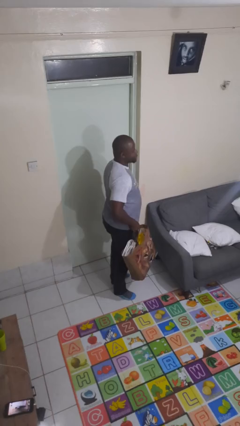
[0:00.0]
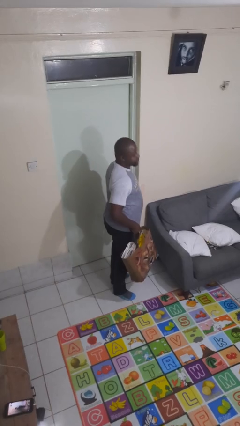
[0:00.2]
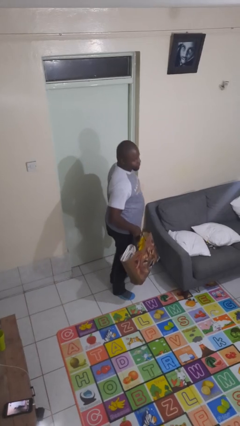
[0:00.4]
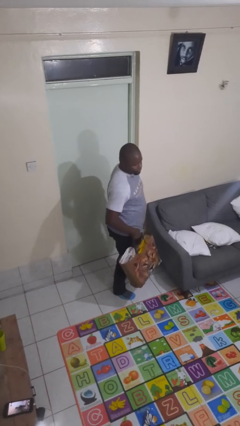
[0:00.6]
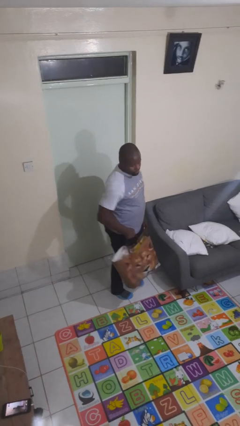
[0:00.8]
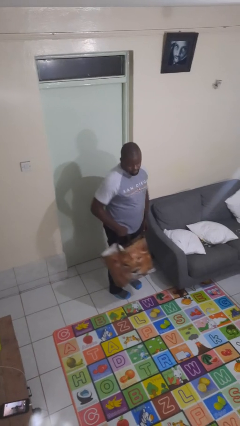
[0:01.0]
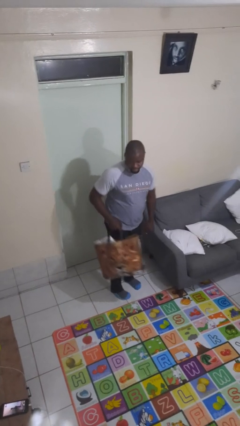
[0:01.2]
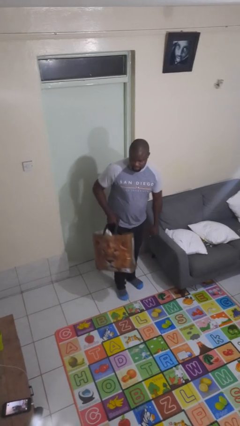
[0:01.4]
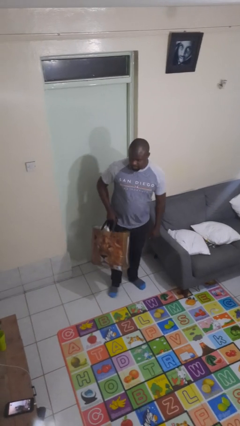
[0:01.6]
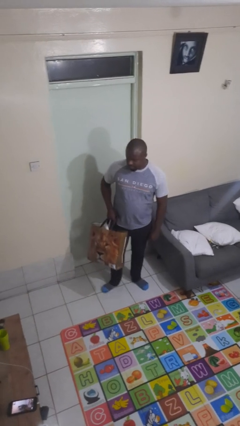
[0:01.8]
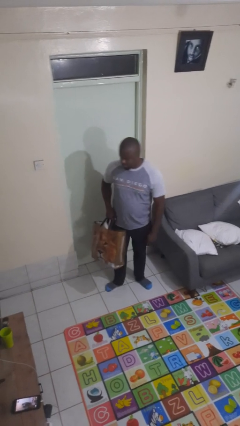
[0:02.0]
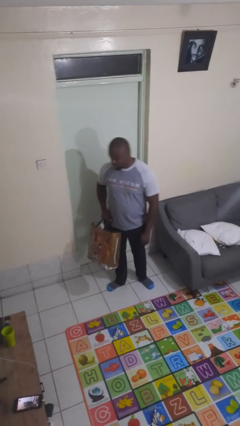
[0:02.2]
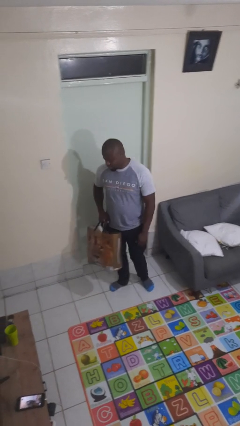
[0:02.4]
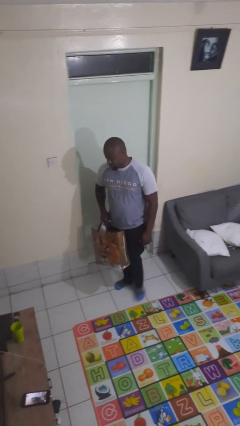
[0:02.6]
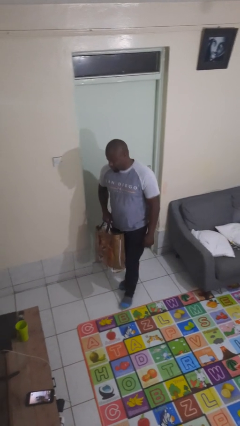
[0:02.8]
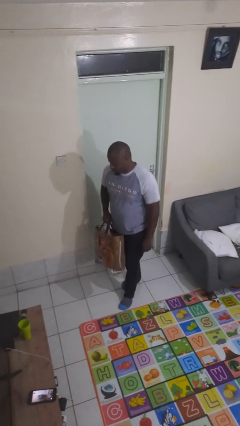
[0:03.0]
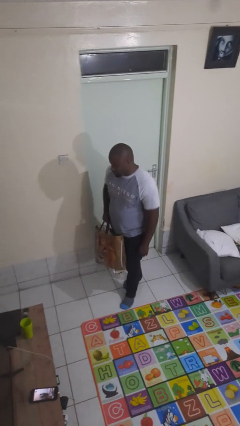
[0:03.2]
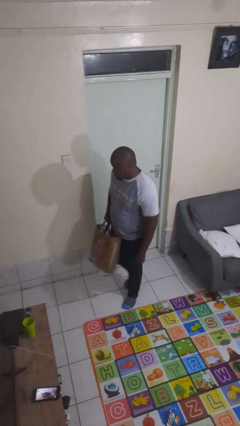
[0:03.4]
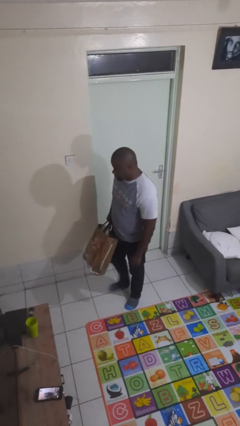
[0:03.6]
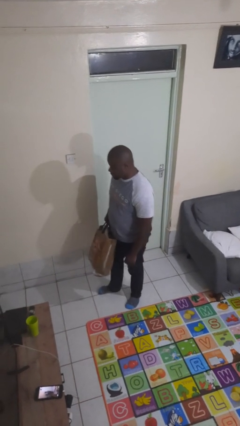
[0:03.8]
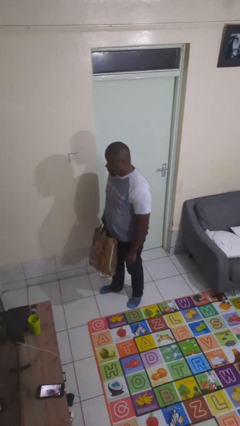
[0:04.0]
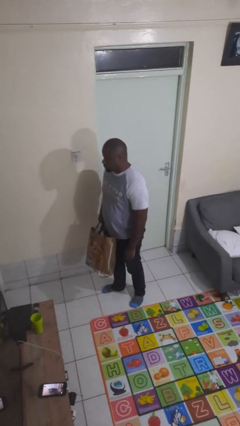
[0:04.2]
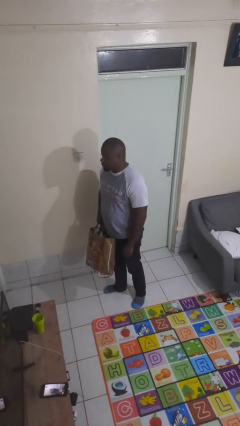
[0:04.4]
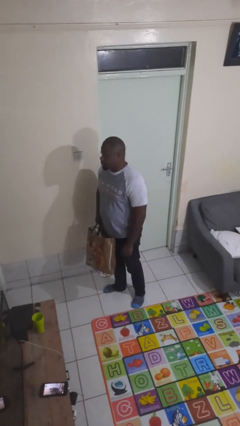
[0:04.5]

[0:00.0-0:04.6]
person carries groceries

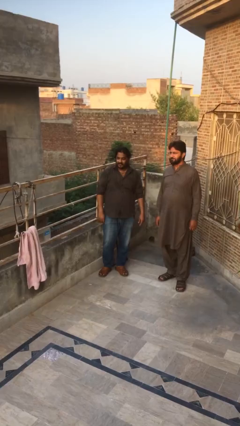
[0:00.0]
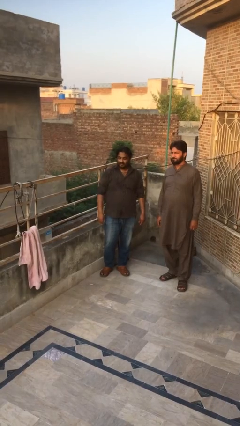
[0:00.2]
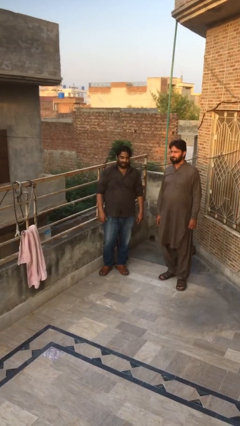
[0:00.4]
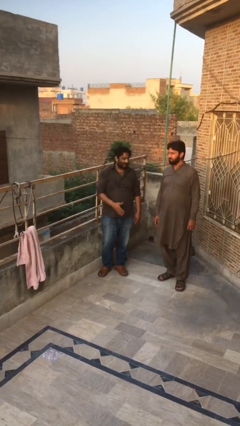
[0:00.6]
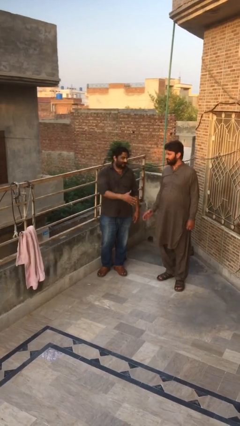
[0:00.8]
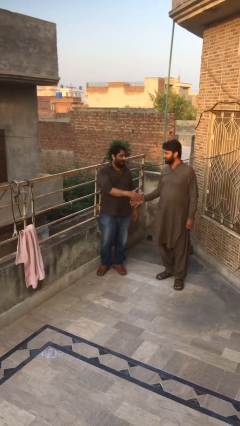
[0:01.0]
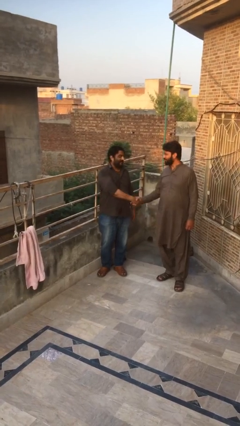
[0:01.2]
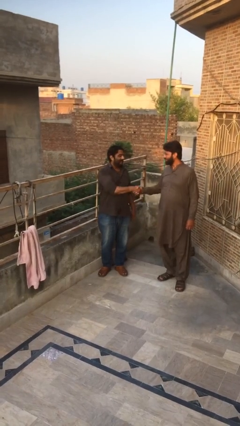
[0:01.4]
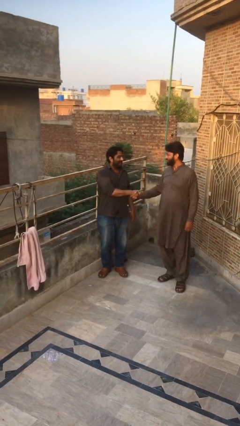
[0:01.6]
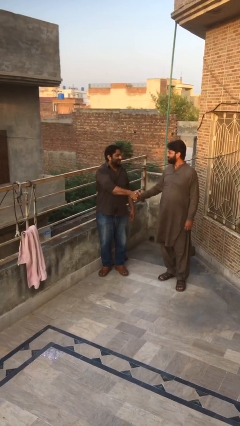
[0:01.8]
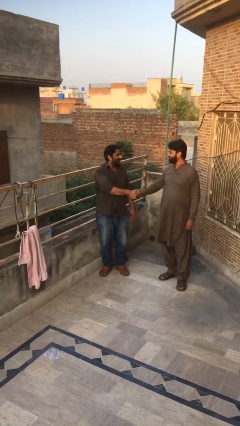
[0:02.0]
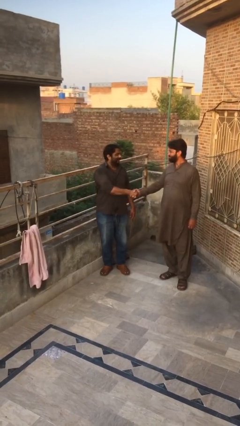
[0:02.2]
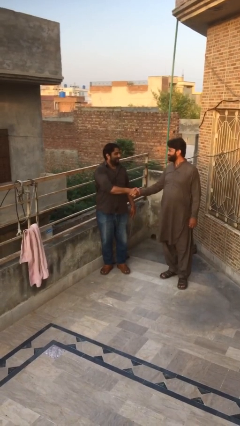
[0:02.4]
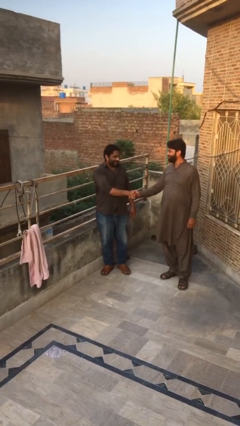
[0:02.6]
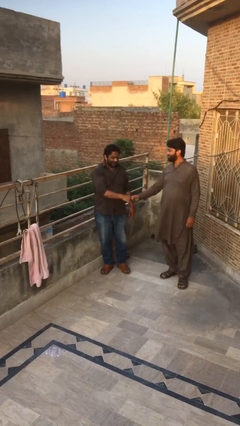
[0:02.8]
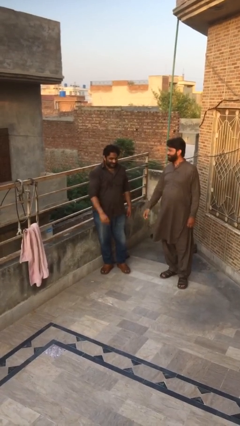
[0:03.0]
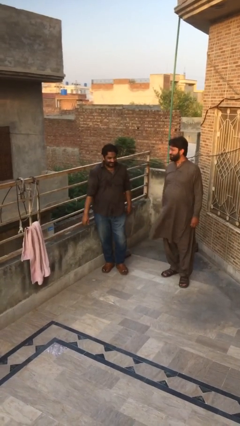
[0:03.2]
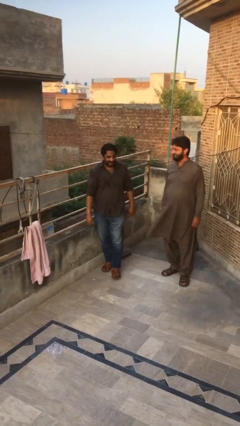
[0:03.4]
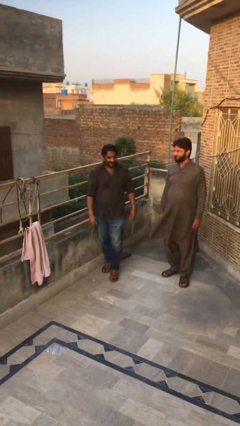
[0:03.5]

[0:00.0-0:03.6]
person shakes hand

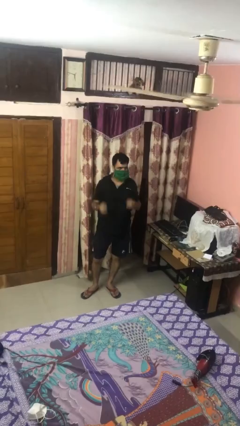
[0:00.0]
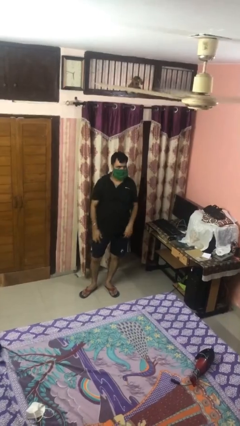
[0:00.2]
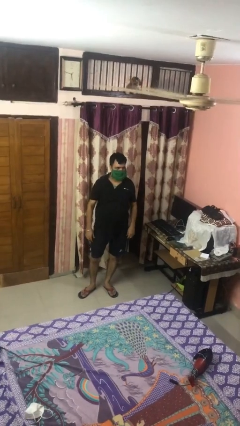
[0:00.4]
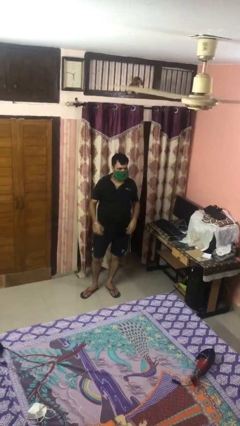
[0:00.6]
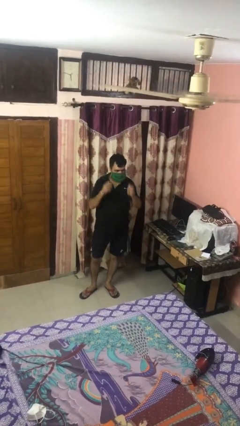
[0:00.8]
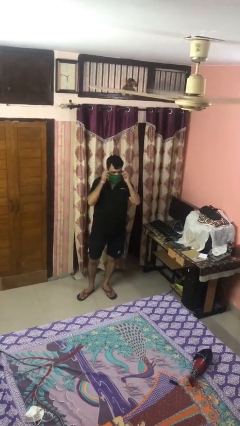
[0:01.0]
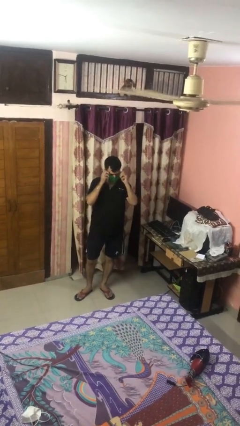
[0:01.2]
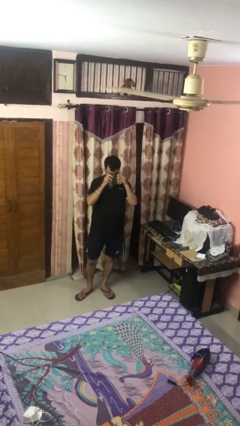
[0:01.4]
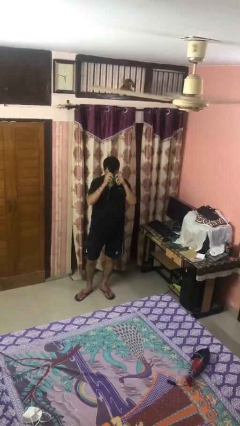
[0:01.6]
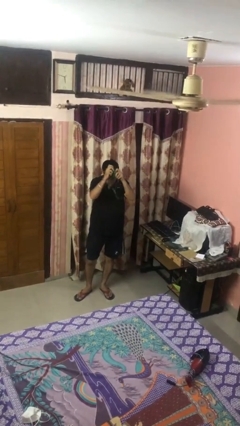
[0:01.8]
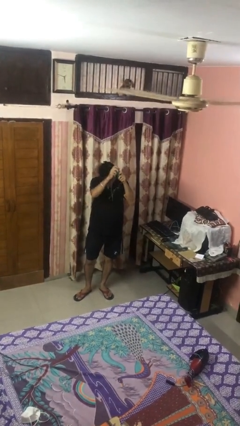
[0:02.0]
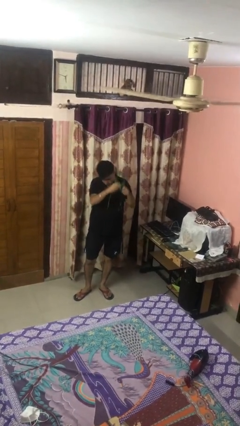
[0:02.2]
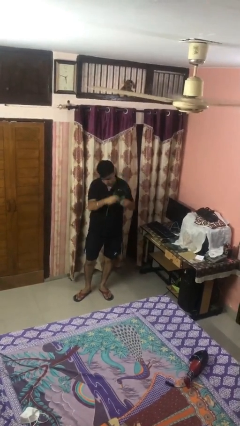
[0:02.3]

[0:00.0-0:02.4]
person takes off facemask

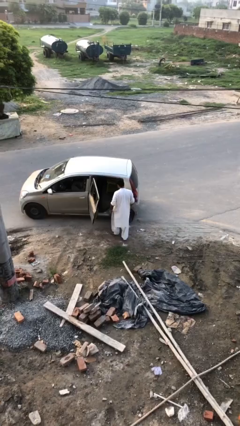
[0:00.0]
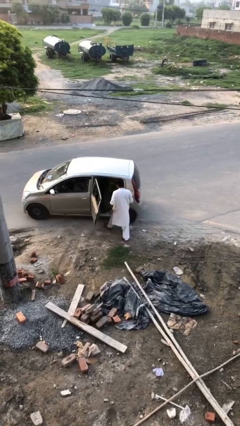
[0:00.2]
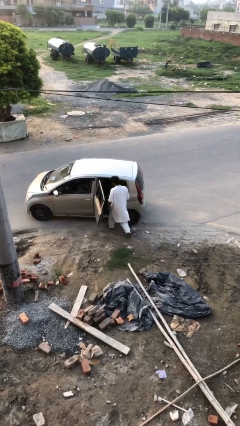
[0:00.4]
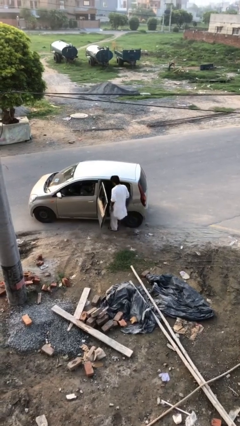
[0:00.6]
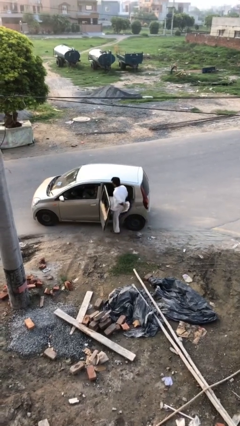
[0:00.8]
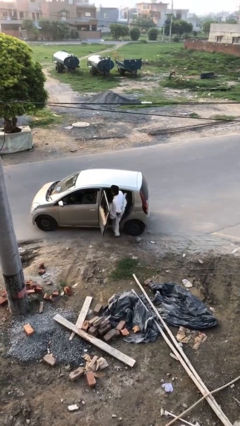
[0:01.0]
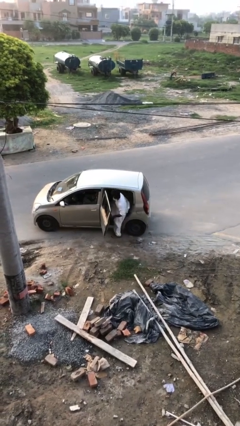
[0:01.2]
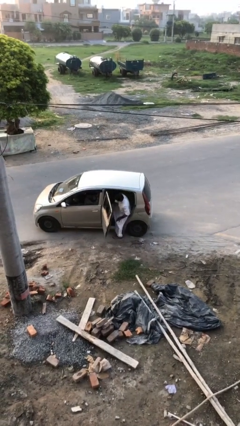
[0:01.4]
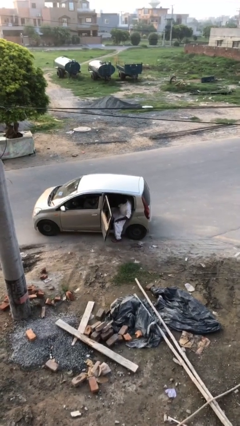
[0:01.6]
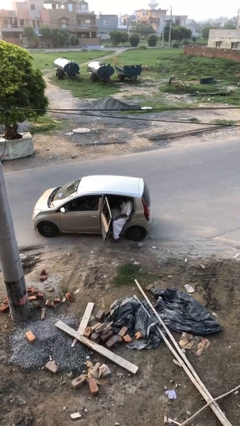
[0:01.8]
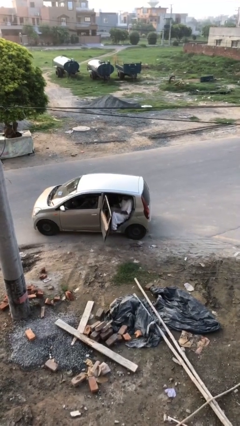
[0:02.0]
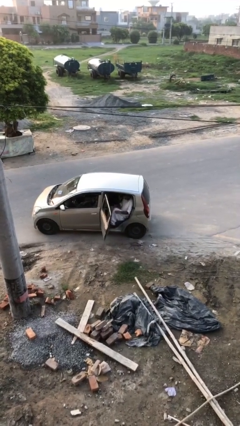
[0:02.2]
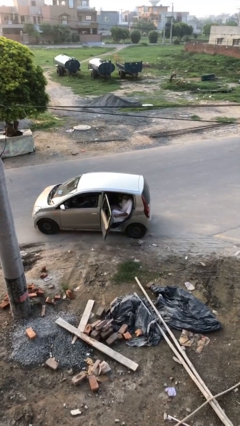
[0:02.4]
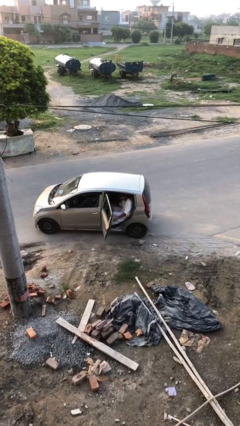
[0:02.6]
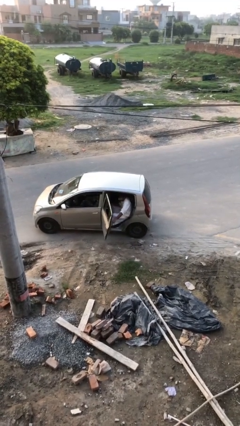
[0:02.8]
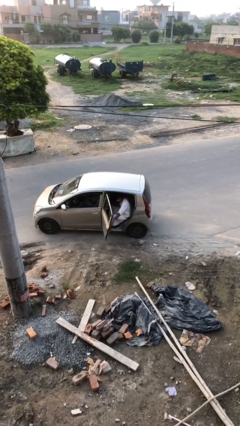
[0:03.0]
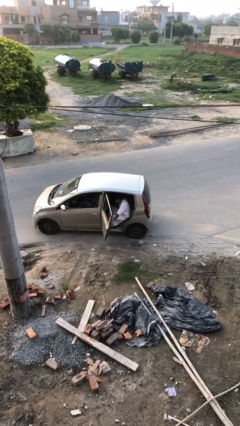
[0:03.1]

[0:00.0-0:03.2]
person enters car

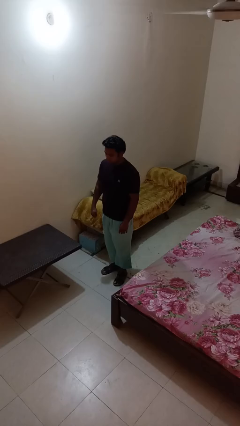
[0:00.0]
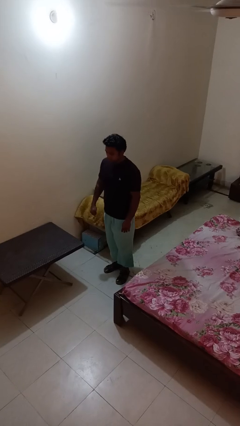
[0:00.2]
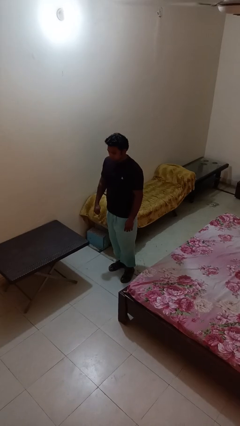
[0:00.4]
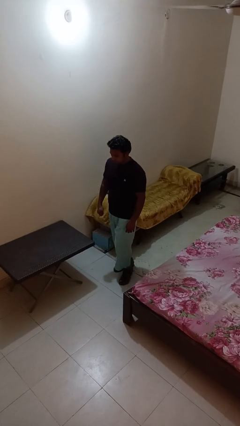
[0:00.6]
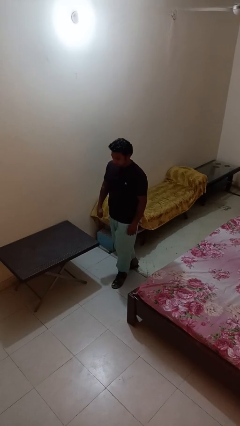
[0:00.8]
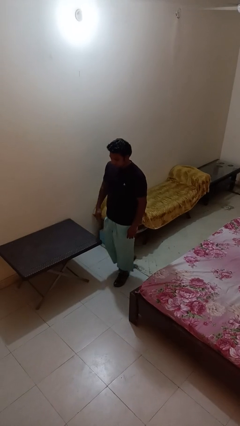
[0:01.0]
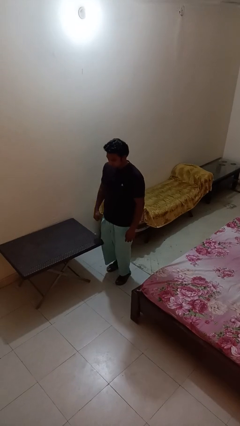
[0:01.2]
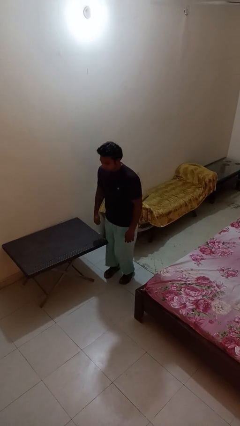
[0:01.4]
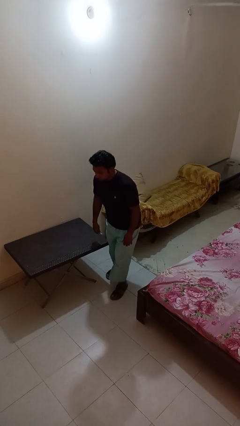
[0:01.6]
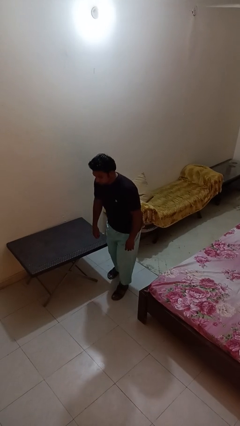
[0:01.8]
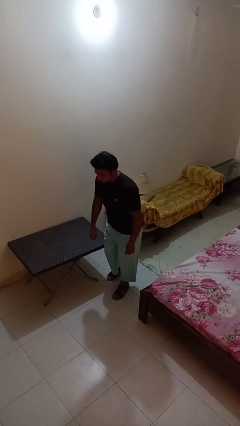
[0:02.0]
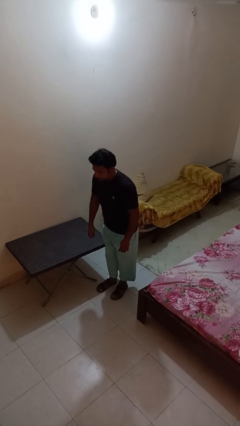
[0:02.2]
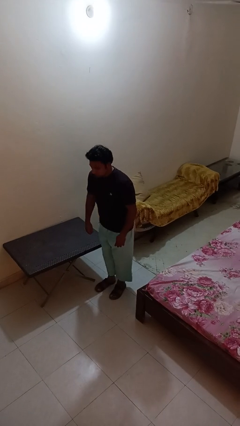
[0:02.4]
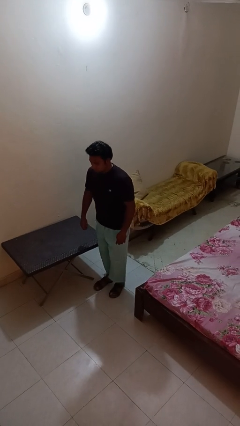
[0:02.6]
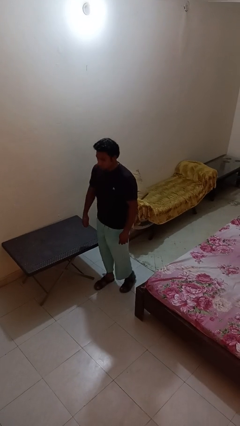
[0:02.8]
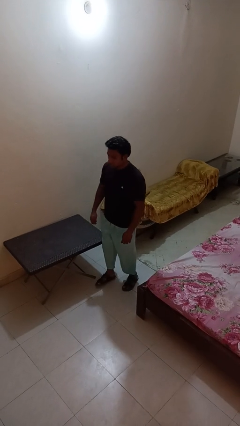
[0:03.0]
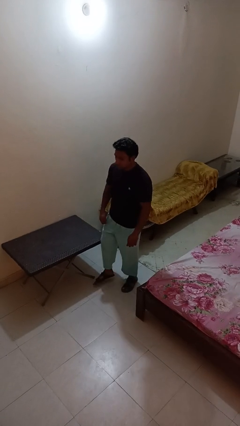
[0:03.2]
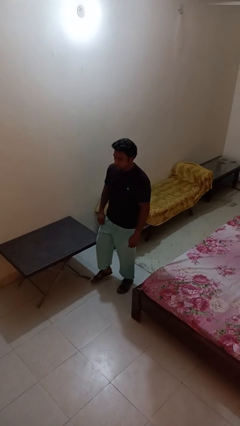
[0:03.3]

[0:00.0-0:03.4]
person bumps into table

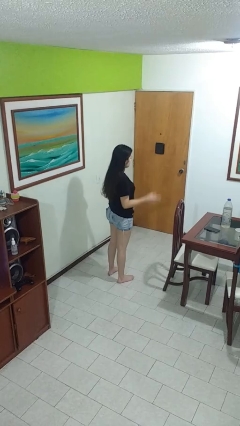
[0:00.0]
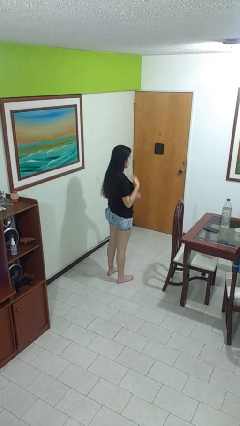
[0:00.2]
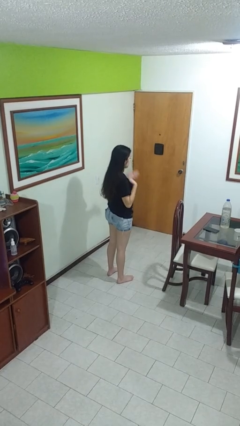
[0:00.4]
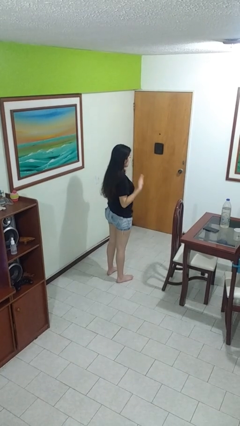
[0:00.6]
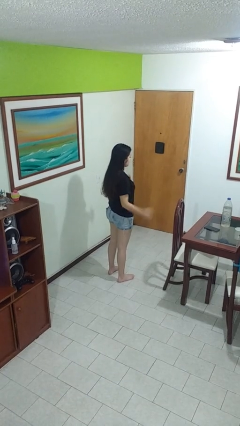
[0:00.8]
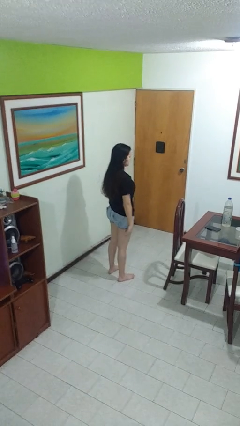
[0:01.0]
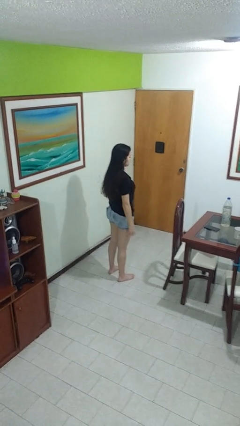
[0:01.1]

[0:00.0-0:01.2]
person drums on chest
